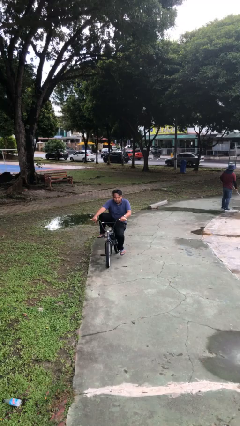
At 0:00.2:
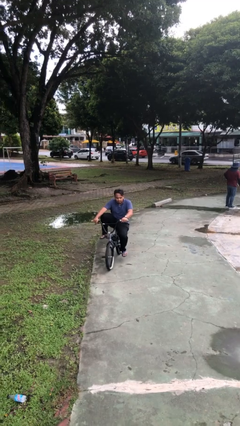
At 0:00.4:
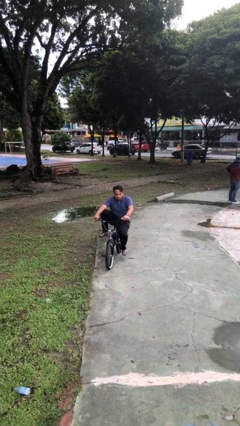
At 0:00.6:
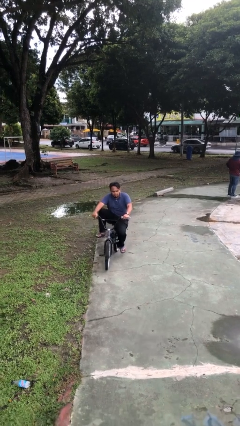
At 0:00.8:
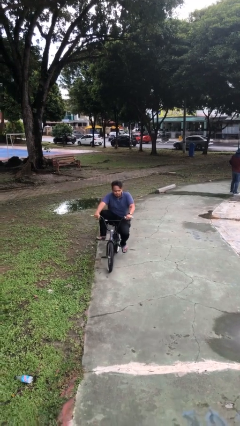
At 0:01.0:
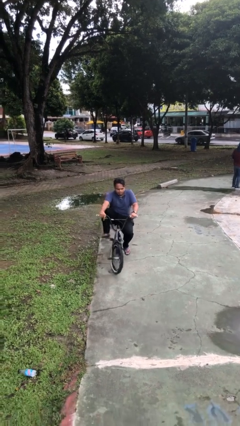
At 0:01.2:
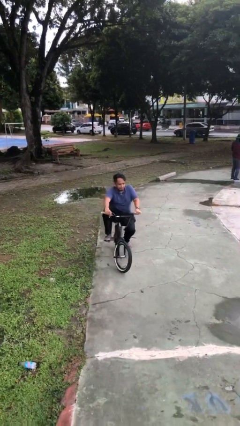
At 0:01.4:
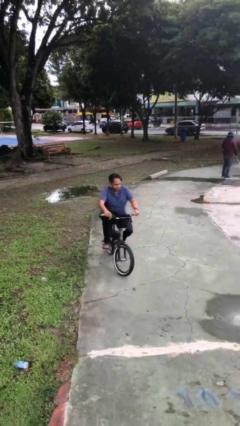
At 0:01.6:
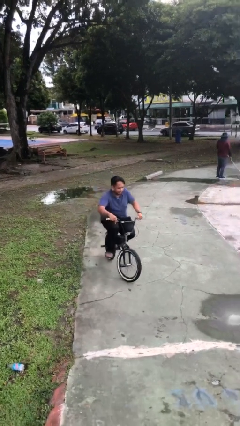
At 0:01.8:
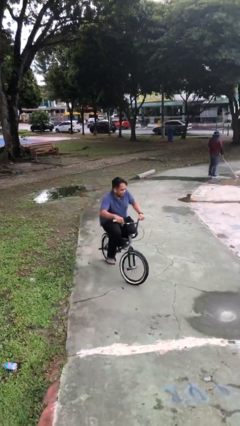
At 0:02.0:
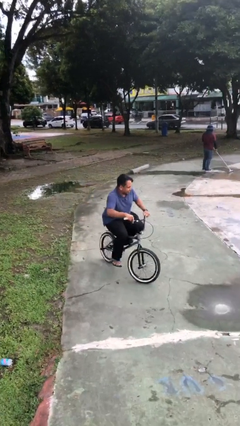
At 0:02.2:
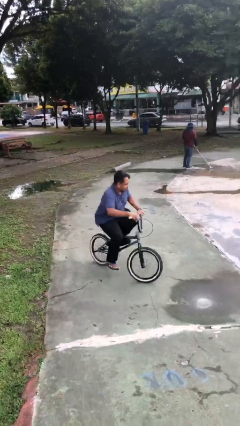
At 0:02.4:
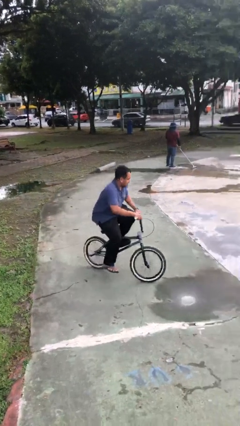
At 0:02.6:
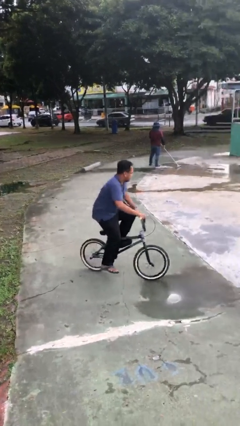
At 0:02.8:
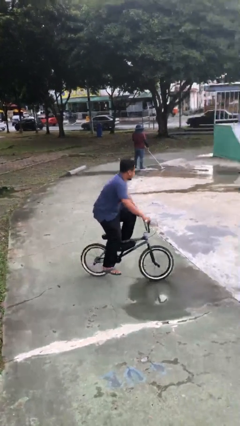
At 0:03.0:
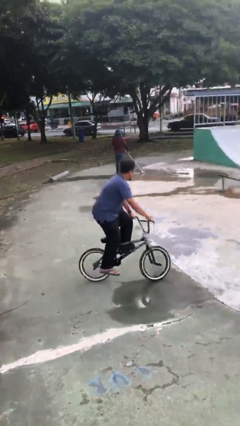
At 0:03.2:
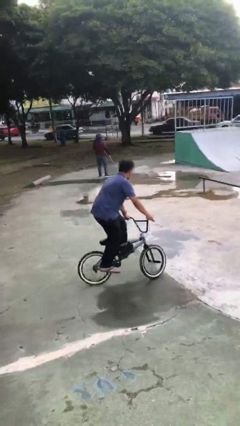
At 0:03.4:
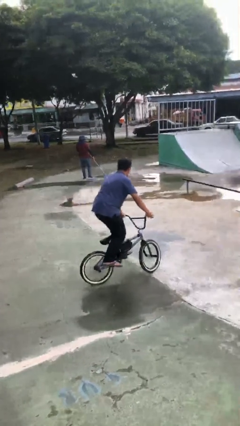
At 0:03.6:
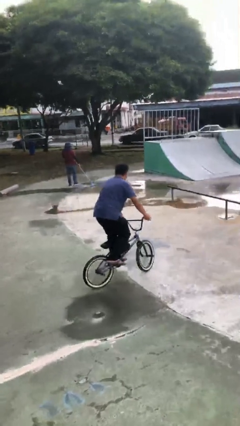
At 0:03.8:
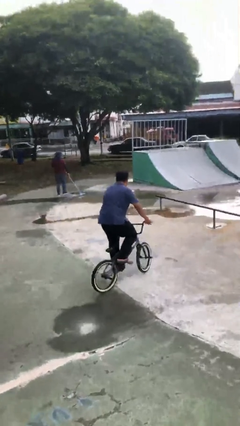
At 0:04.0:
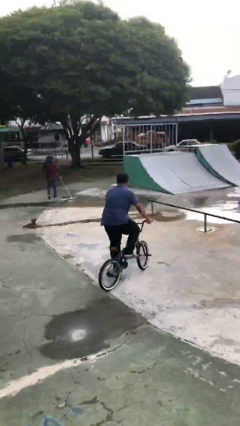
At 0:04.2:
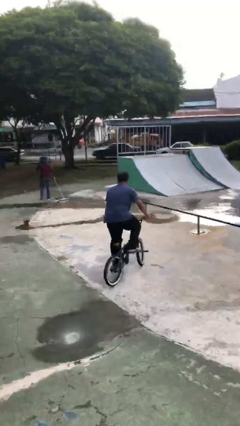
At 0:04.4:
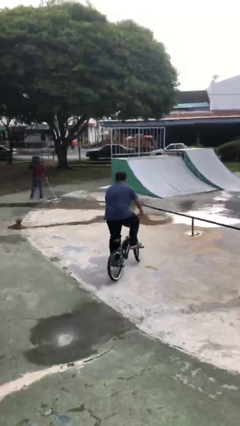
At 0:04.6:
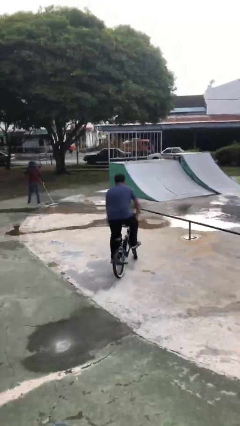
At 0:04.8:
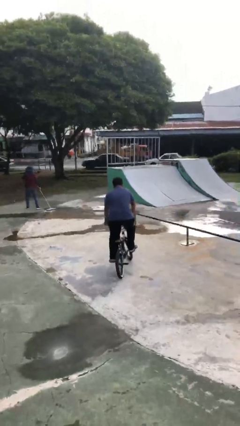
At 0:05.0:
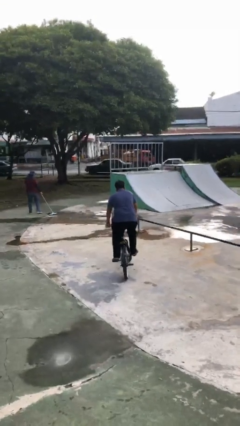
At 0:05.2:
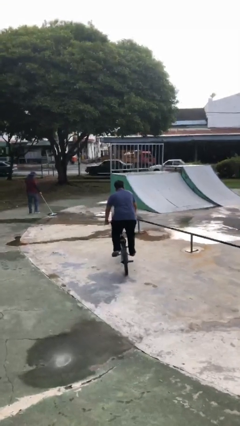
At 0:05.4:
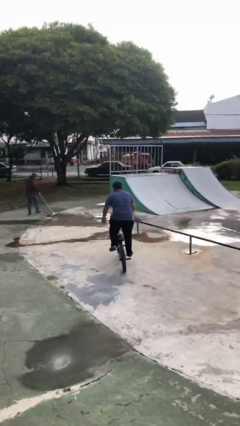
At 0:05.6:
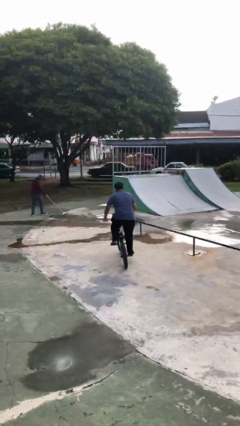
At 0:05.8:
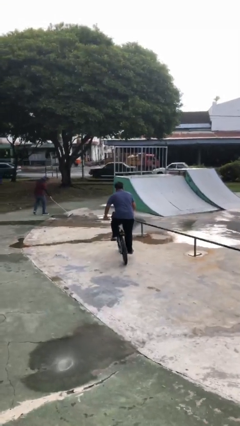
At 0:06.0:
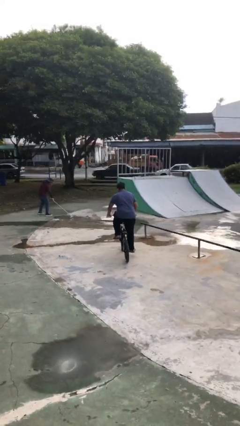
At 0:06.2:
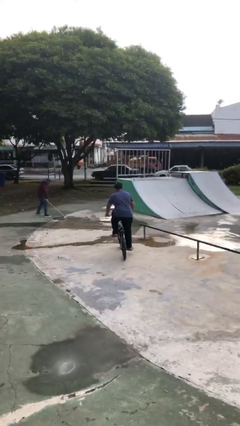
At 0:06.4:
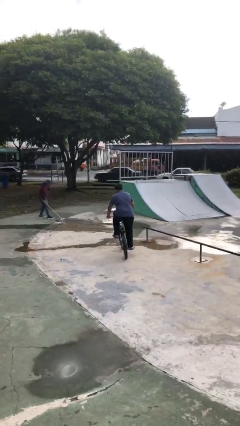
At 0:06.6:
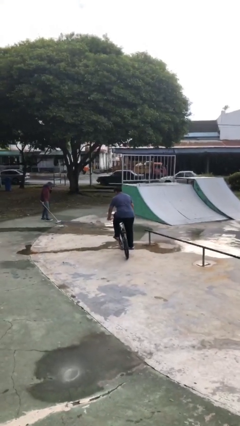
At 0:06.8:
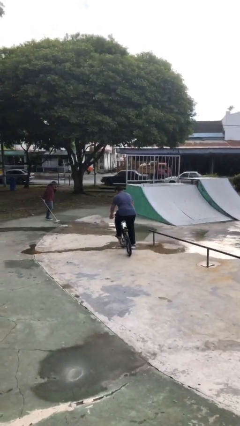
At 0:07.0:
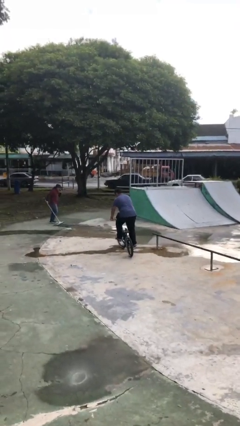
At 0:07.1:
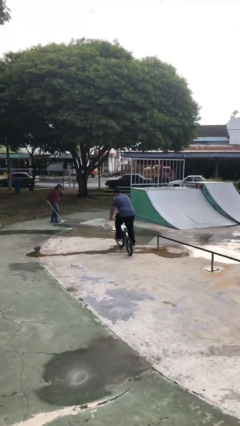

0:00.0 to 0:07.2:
person rides bicycle

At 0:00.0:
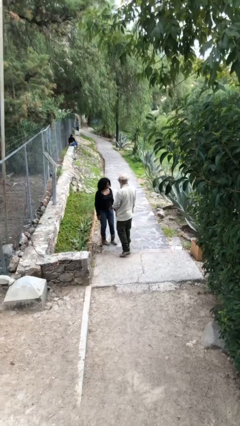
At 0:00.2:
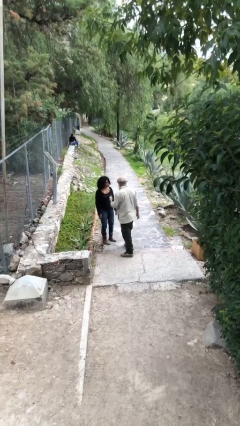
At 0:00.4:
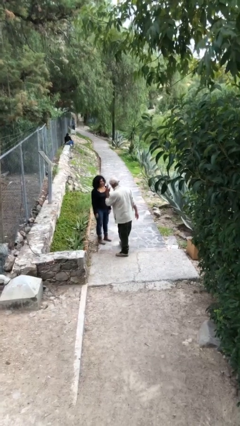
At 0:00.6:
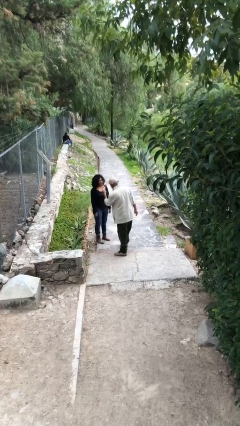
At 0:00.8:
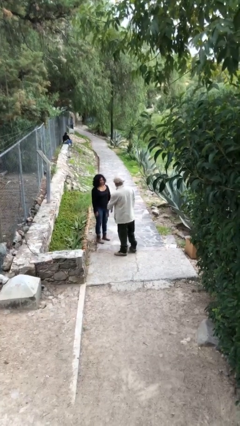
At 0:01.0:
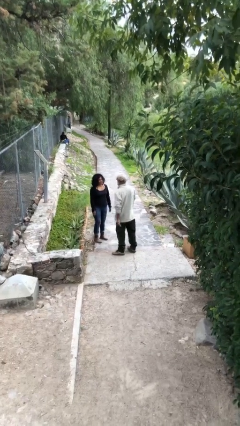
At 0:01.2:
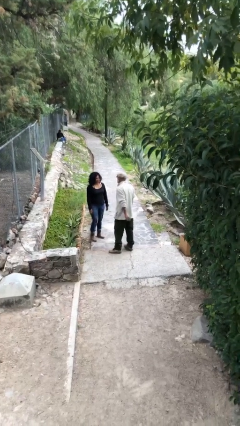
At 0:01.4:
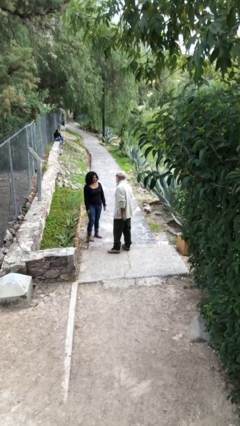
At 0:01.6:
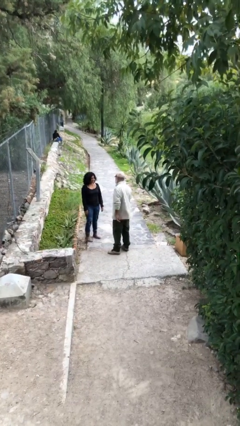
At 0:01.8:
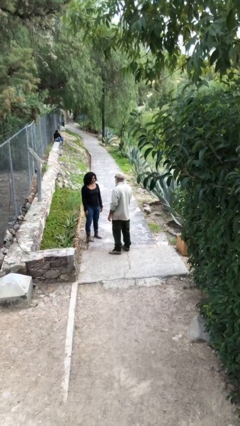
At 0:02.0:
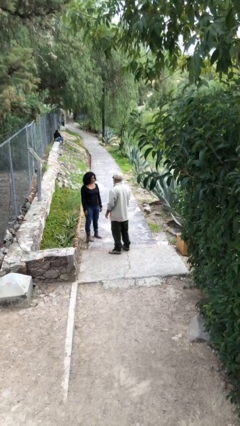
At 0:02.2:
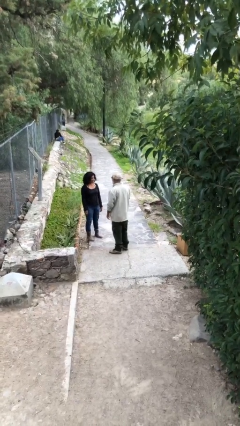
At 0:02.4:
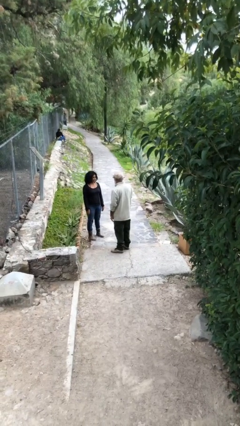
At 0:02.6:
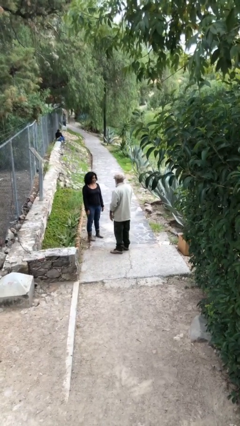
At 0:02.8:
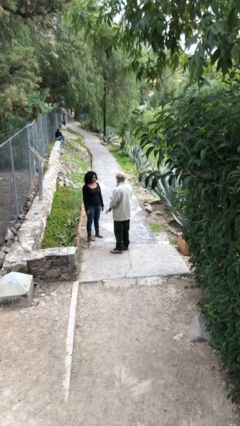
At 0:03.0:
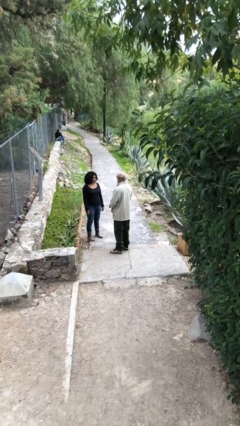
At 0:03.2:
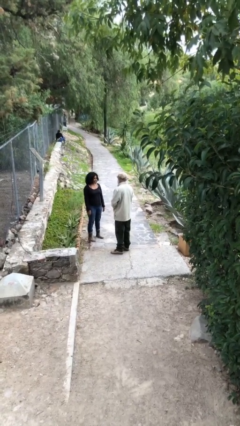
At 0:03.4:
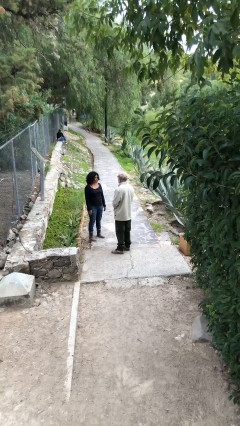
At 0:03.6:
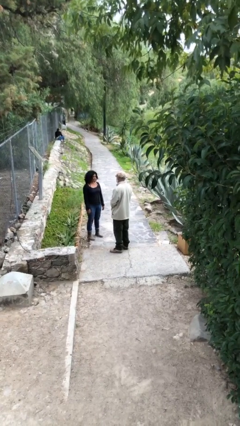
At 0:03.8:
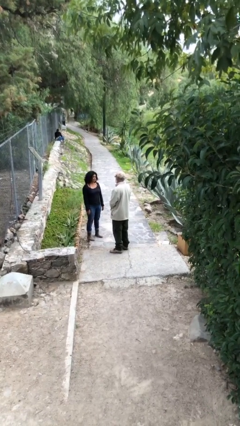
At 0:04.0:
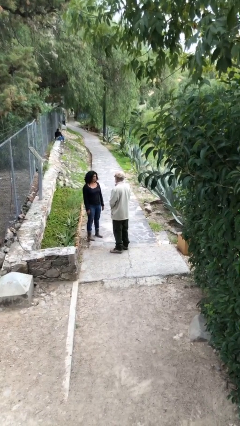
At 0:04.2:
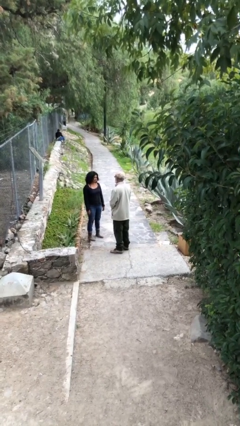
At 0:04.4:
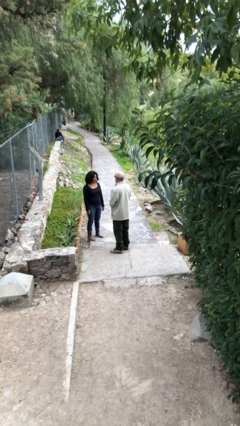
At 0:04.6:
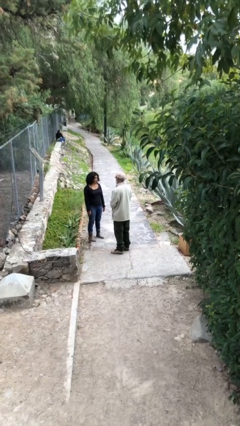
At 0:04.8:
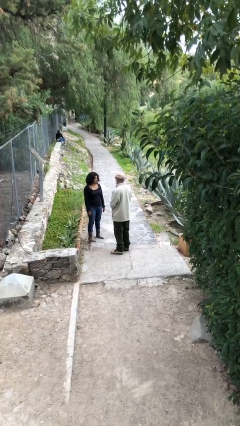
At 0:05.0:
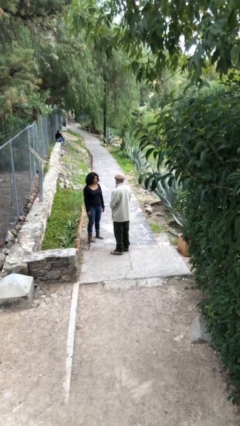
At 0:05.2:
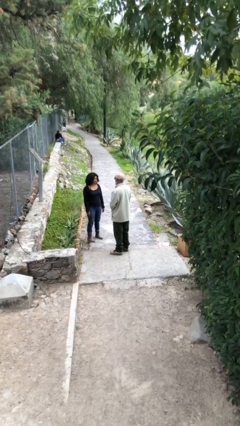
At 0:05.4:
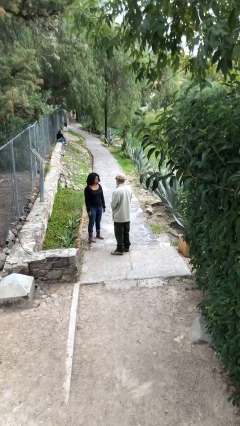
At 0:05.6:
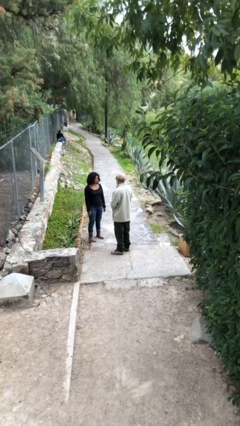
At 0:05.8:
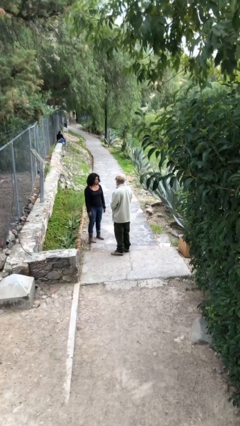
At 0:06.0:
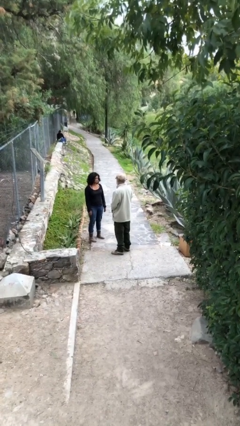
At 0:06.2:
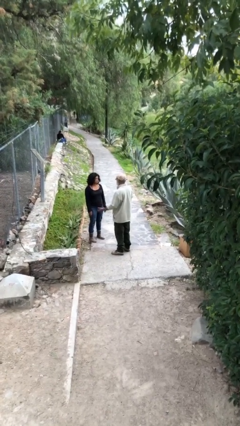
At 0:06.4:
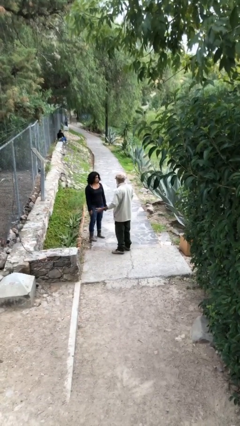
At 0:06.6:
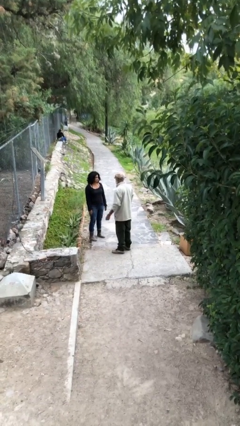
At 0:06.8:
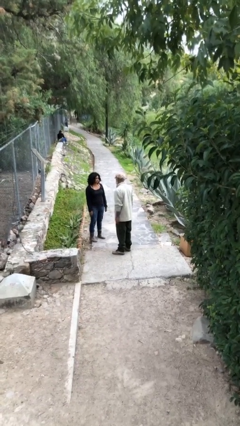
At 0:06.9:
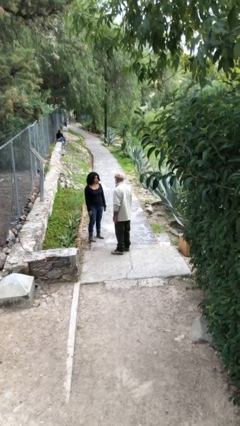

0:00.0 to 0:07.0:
person talks to person

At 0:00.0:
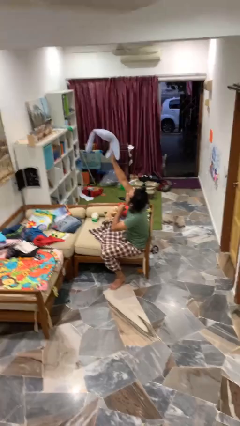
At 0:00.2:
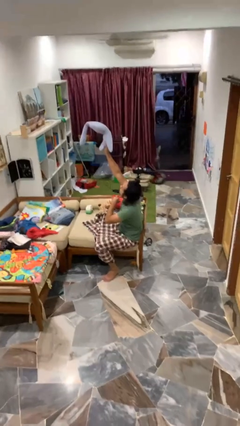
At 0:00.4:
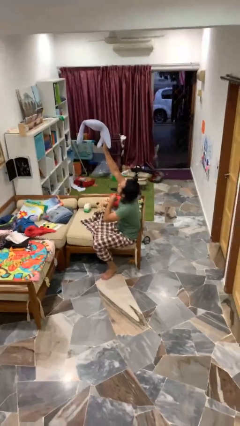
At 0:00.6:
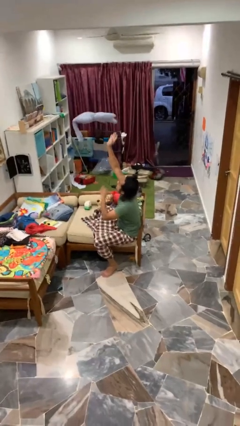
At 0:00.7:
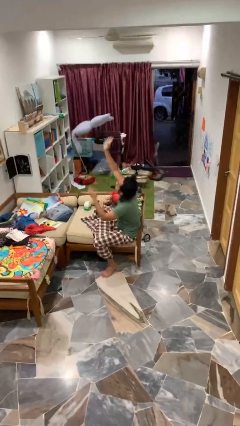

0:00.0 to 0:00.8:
person drops object

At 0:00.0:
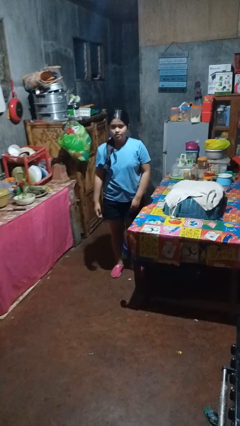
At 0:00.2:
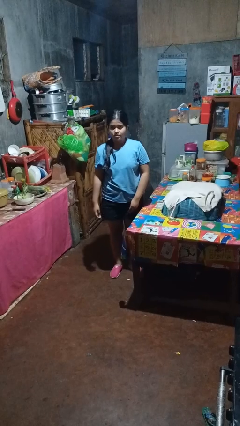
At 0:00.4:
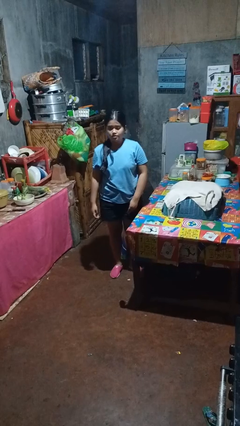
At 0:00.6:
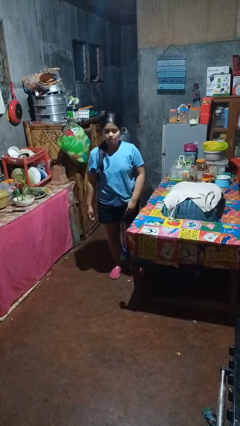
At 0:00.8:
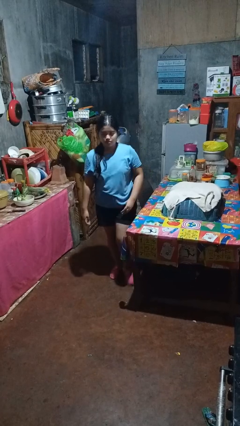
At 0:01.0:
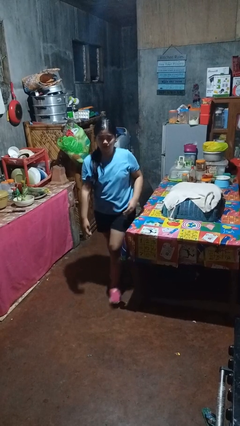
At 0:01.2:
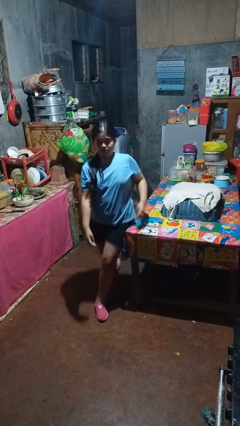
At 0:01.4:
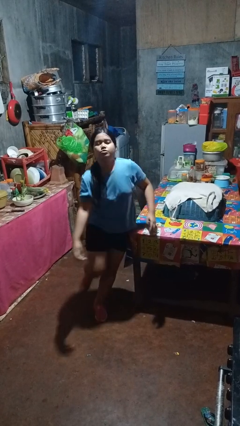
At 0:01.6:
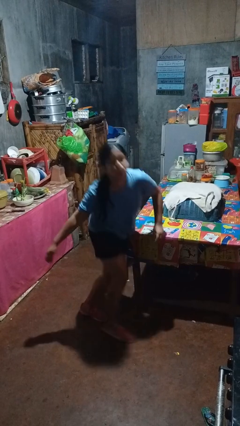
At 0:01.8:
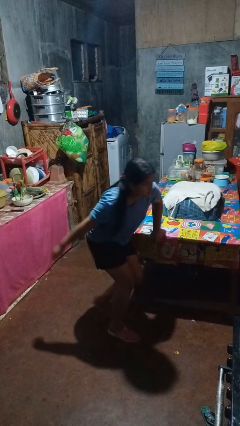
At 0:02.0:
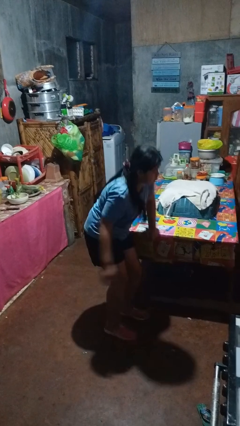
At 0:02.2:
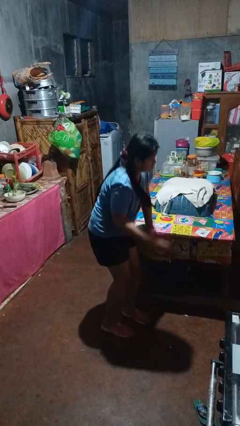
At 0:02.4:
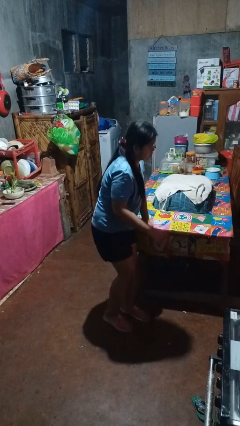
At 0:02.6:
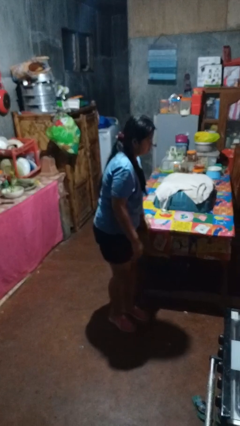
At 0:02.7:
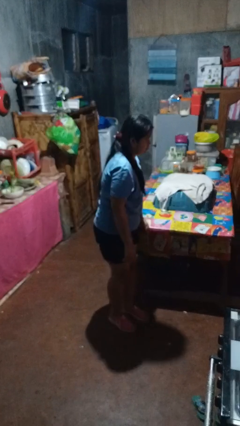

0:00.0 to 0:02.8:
person bumps into table
